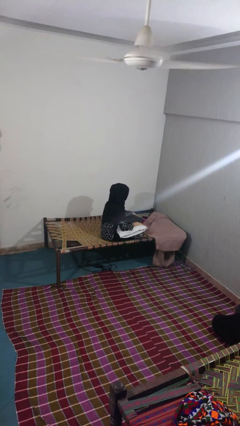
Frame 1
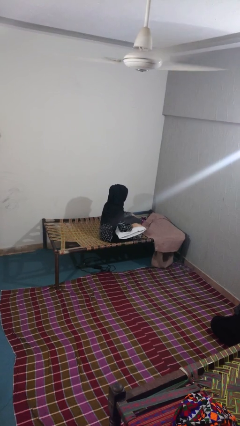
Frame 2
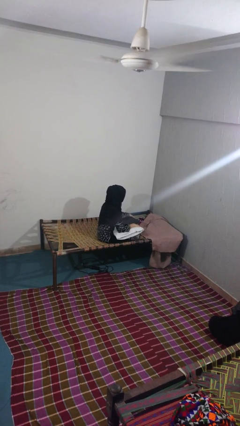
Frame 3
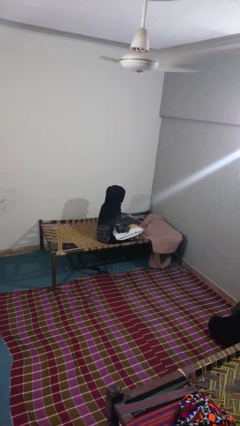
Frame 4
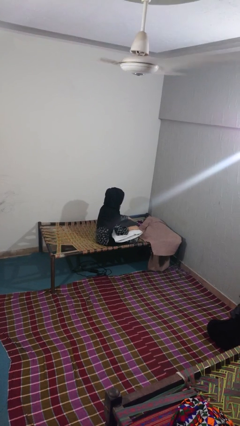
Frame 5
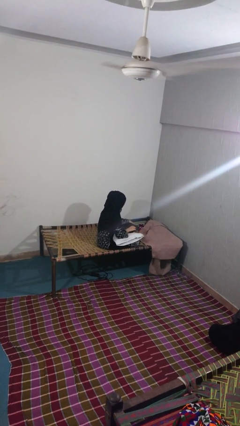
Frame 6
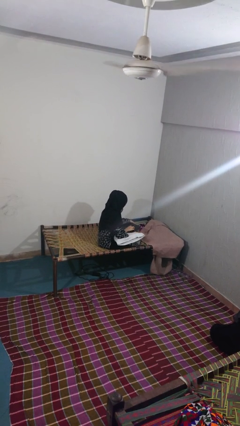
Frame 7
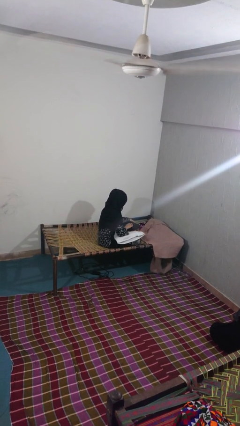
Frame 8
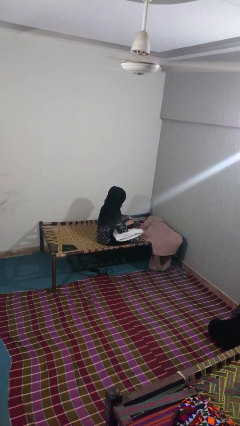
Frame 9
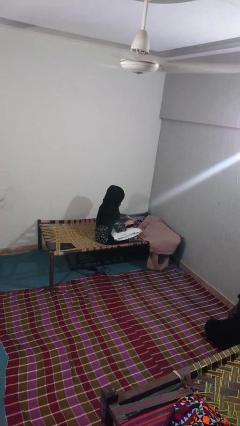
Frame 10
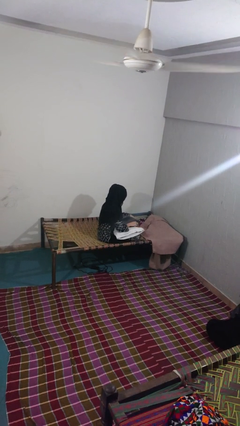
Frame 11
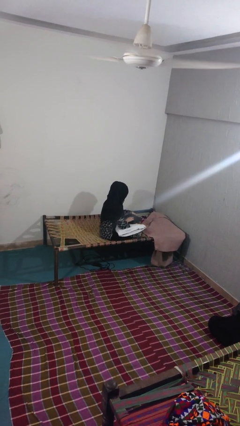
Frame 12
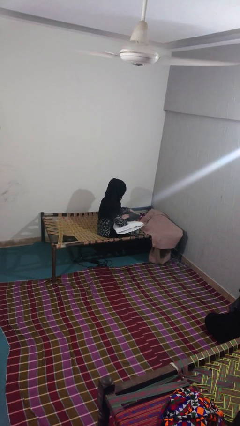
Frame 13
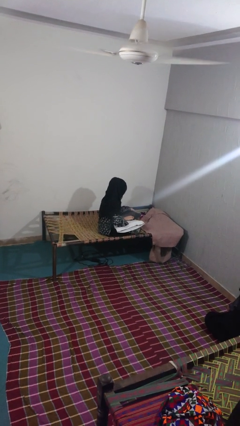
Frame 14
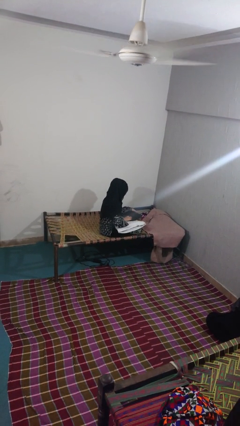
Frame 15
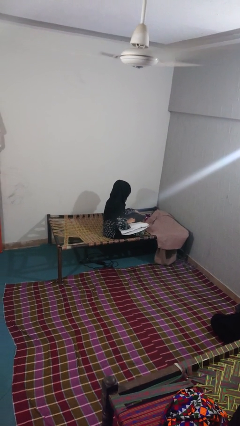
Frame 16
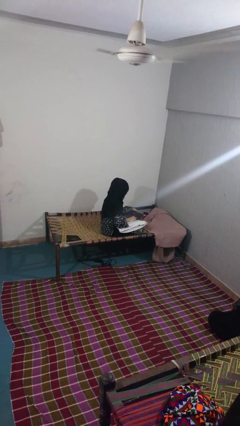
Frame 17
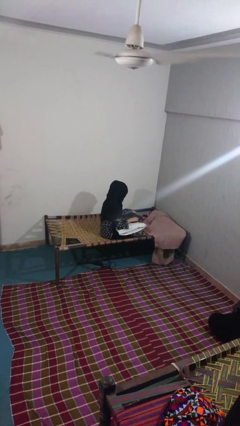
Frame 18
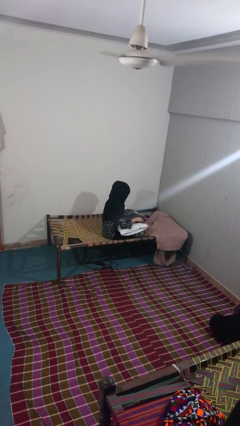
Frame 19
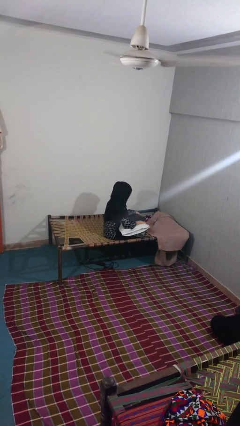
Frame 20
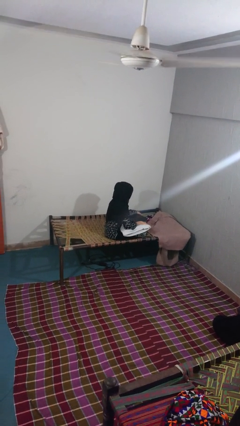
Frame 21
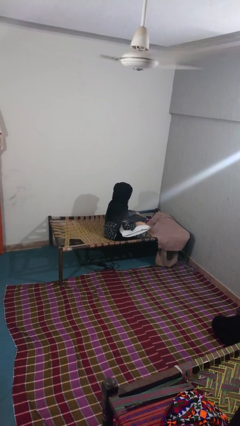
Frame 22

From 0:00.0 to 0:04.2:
person interacts with tablet

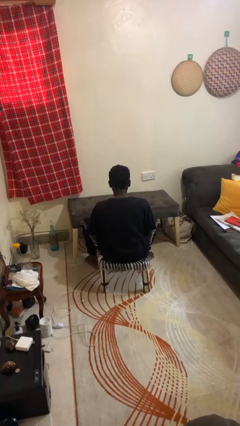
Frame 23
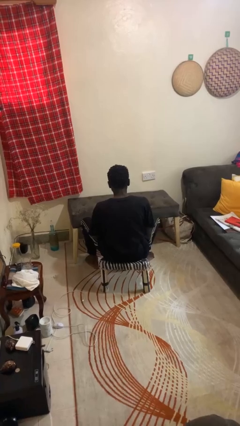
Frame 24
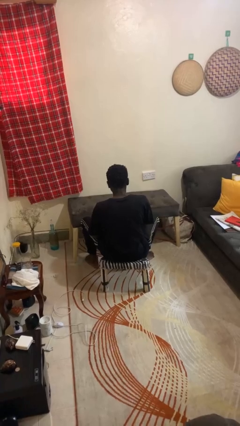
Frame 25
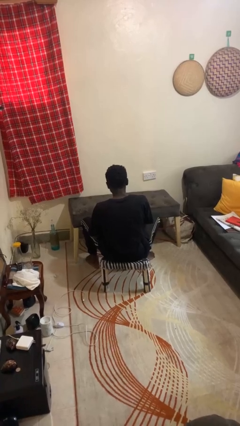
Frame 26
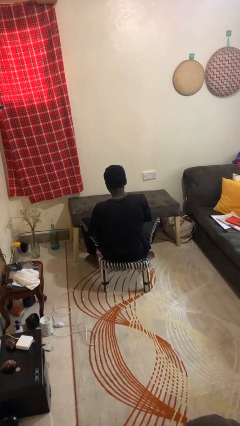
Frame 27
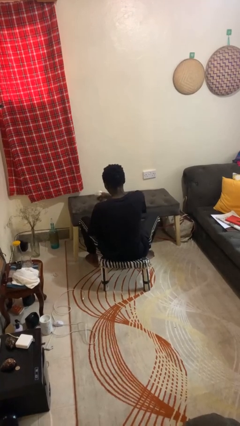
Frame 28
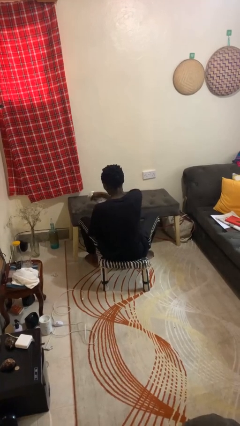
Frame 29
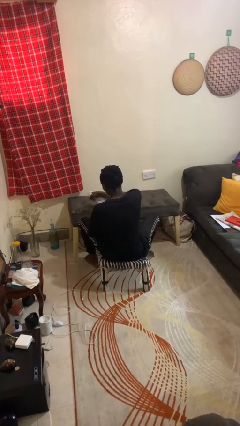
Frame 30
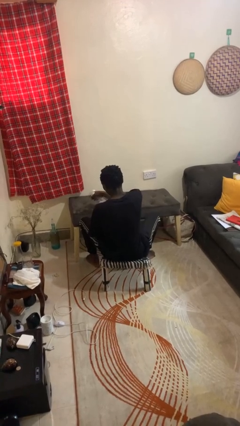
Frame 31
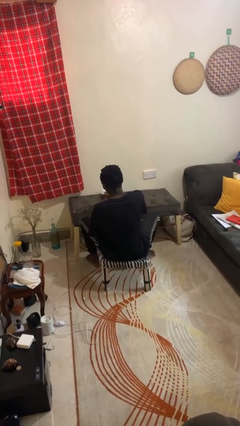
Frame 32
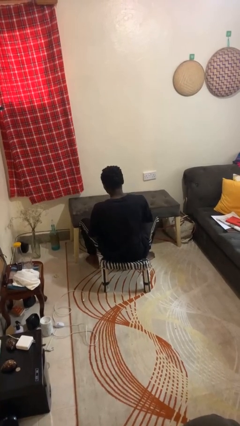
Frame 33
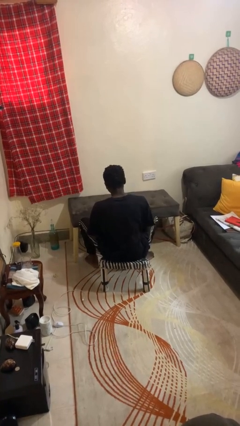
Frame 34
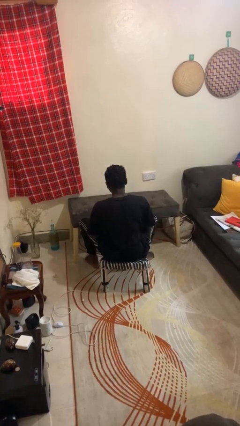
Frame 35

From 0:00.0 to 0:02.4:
person sprays from bottle

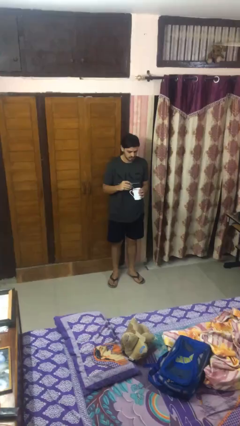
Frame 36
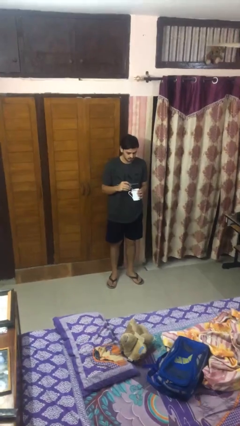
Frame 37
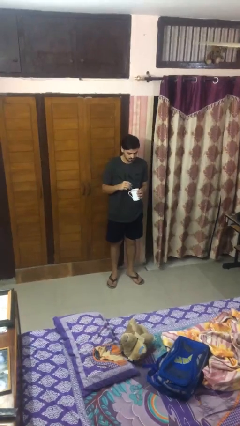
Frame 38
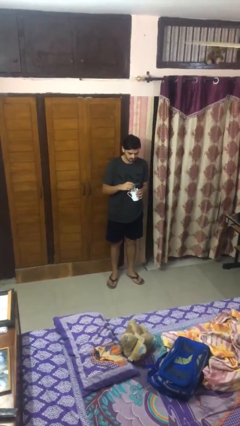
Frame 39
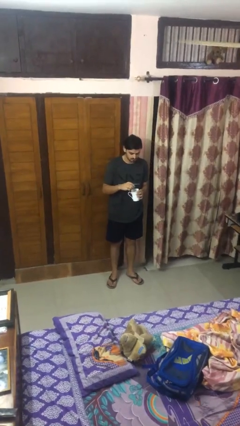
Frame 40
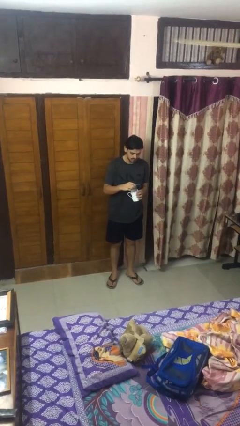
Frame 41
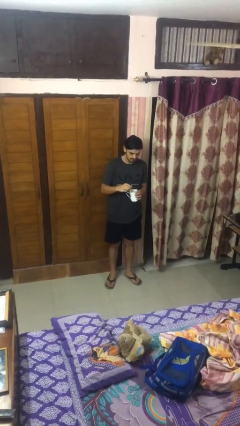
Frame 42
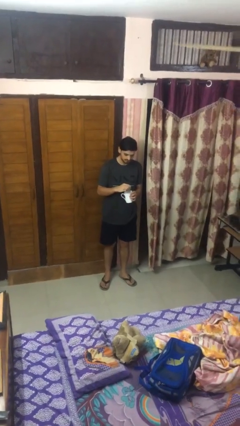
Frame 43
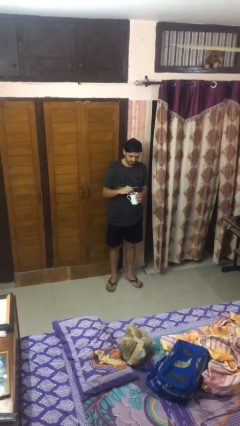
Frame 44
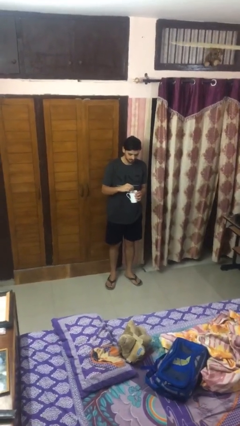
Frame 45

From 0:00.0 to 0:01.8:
person stirs mug

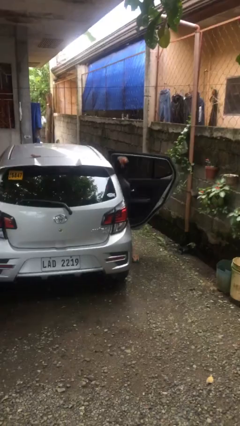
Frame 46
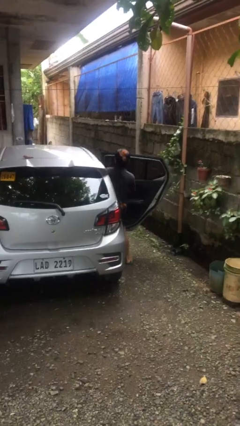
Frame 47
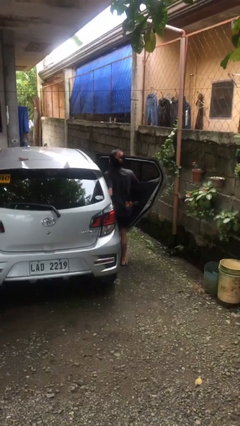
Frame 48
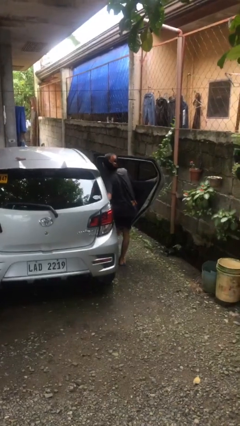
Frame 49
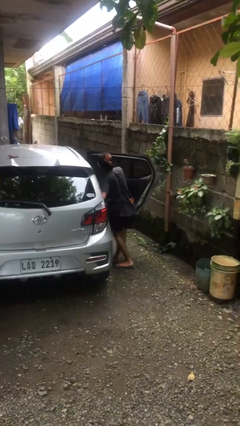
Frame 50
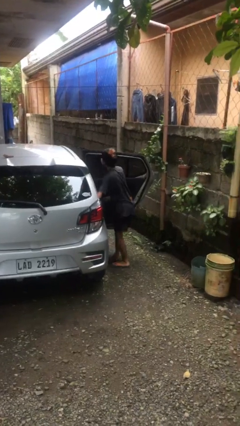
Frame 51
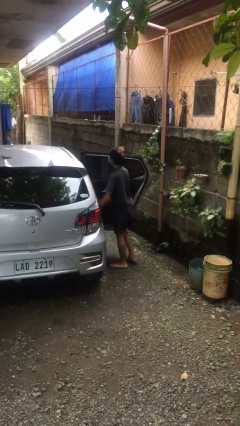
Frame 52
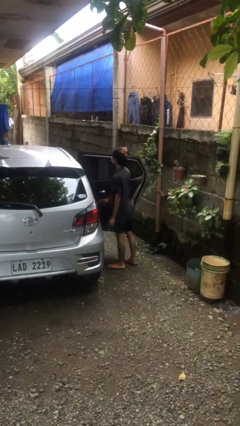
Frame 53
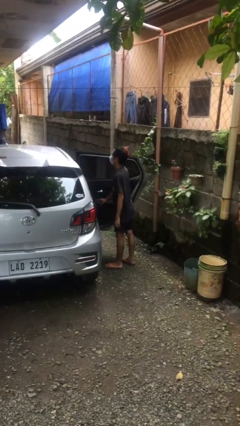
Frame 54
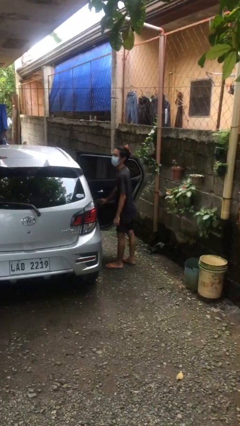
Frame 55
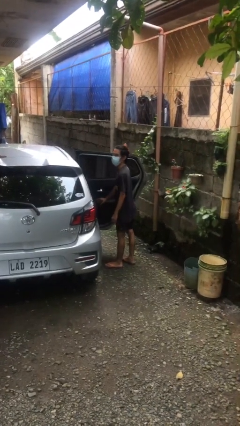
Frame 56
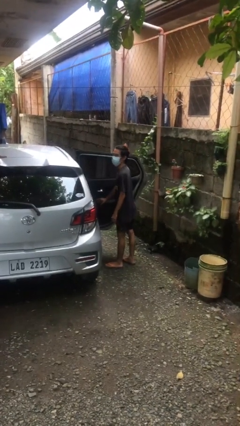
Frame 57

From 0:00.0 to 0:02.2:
person exits car

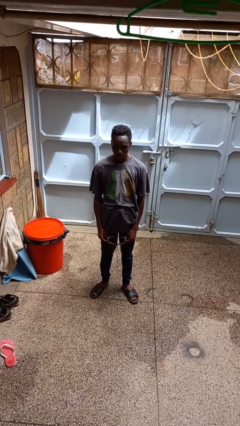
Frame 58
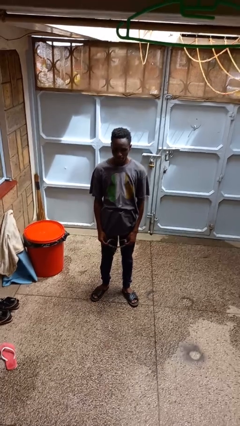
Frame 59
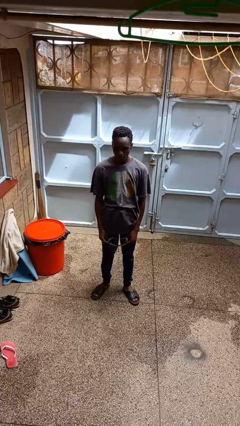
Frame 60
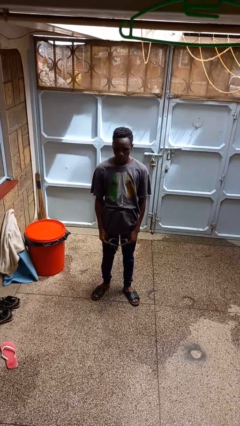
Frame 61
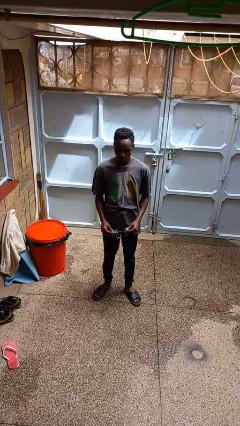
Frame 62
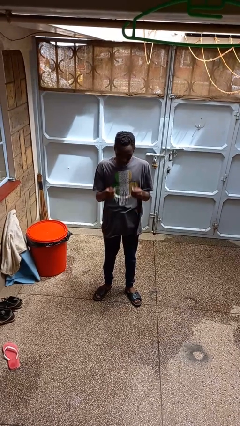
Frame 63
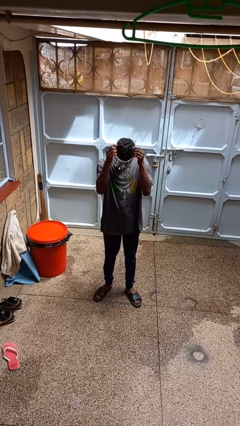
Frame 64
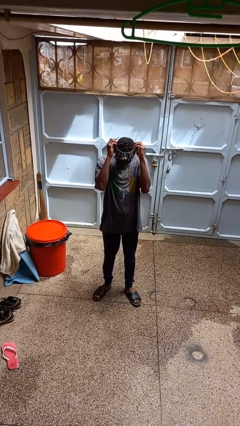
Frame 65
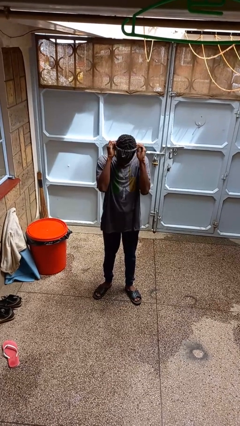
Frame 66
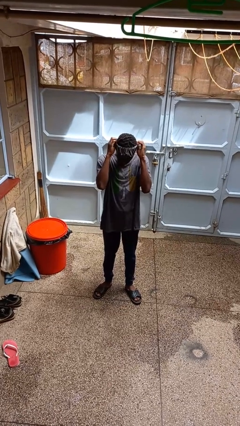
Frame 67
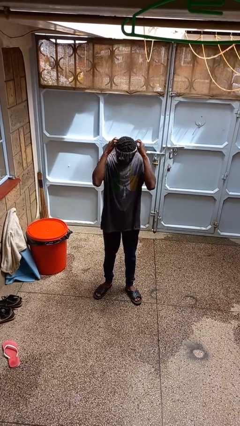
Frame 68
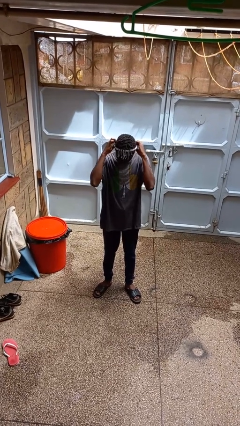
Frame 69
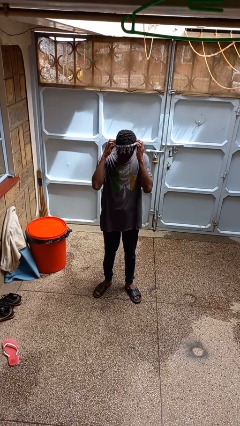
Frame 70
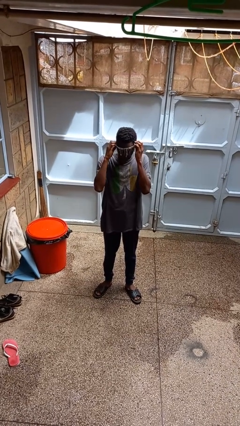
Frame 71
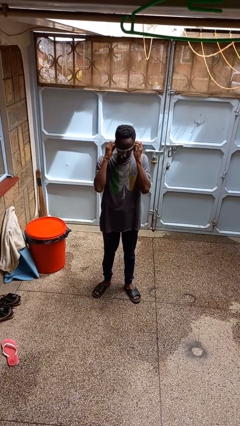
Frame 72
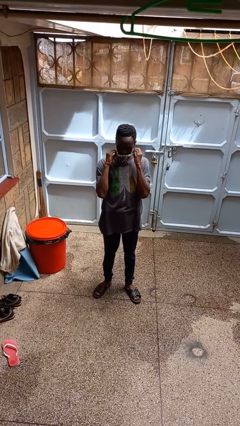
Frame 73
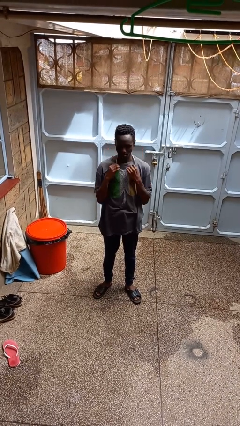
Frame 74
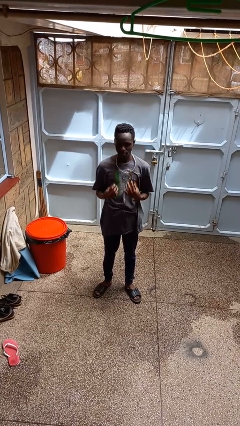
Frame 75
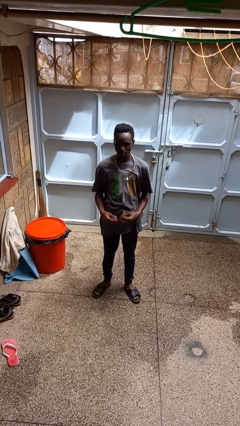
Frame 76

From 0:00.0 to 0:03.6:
person puts on necklace

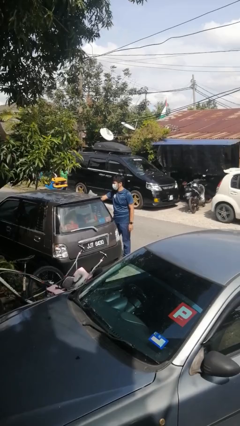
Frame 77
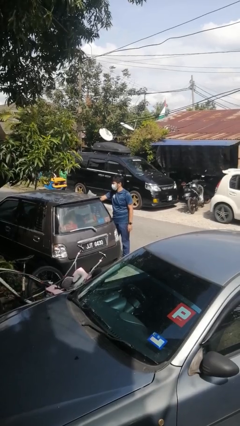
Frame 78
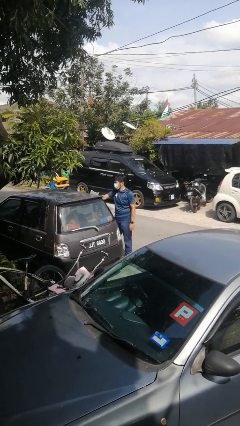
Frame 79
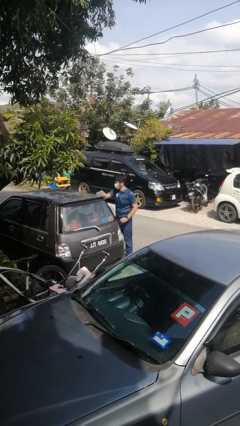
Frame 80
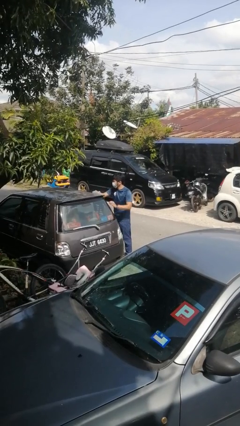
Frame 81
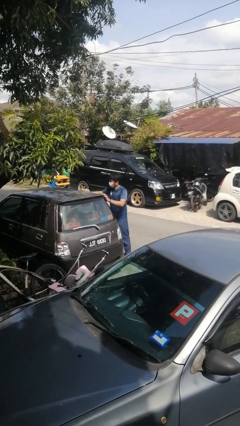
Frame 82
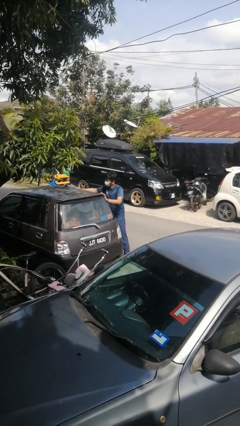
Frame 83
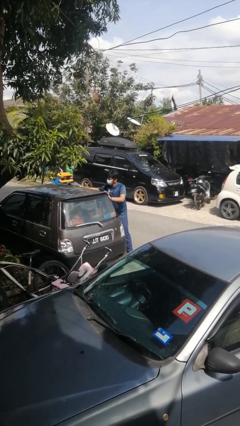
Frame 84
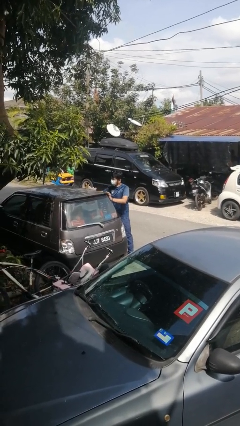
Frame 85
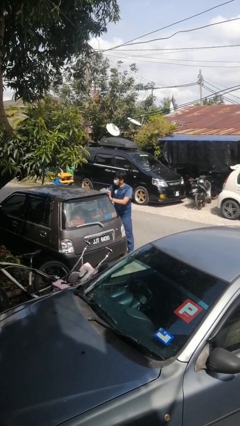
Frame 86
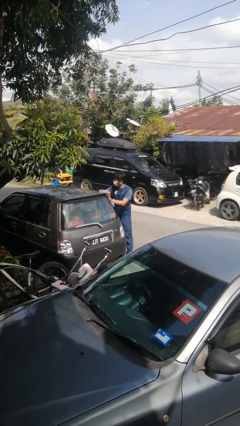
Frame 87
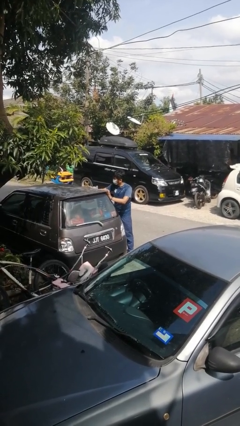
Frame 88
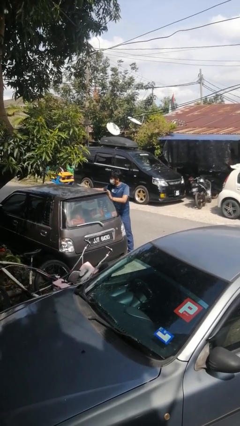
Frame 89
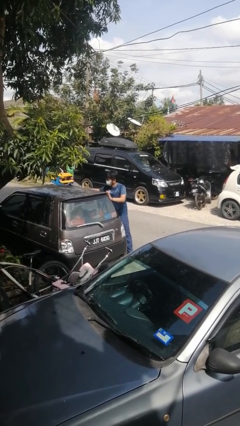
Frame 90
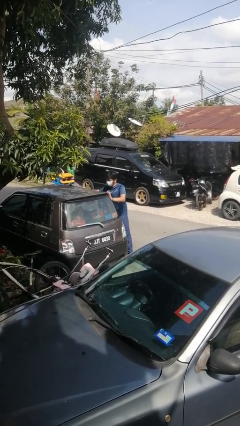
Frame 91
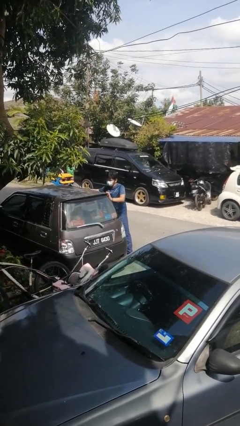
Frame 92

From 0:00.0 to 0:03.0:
person polishes car with rag

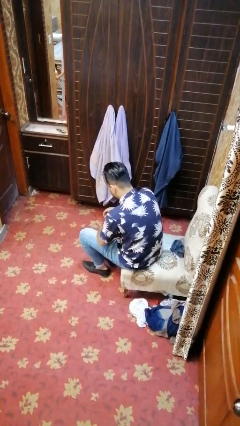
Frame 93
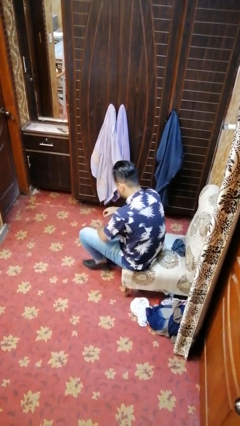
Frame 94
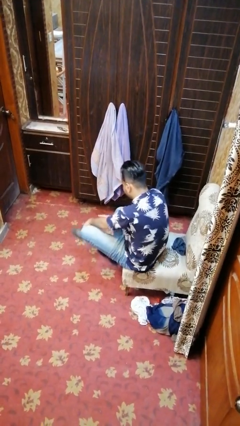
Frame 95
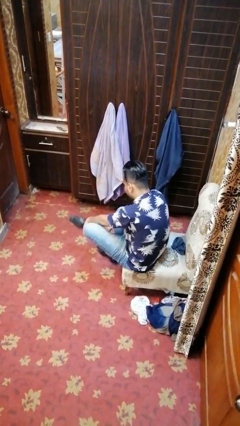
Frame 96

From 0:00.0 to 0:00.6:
person takes off shoes
